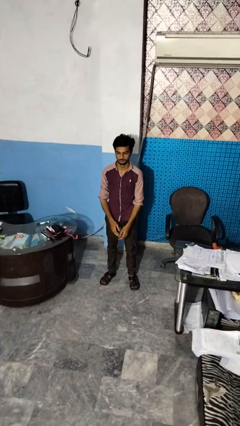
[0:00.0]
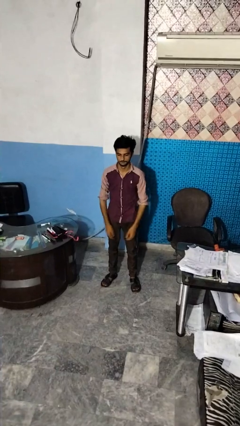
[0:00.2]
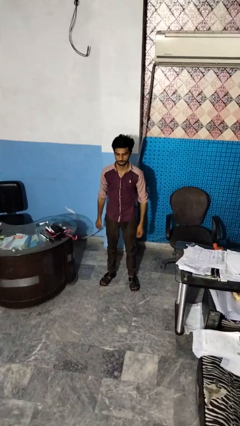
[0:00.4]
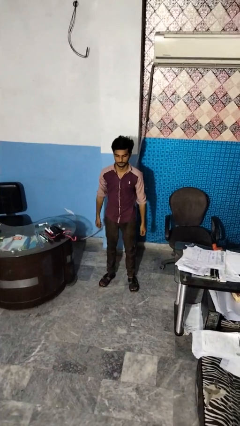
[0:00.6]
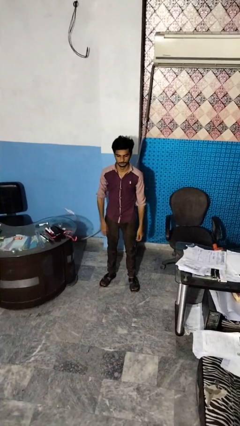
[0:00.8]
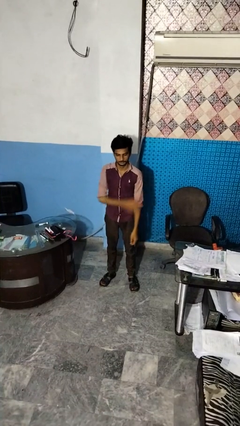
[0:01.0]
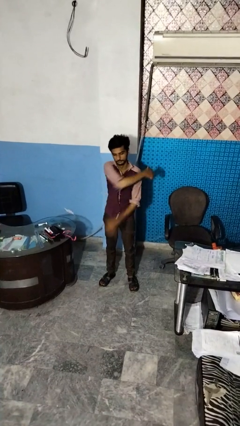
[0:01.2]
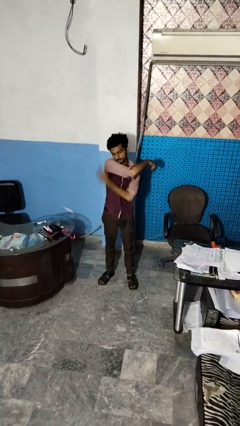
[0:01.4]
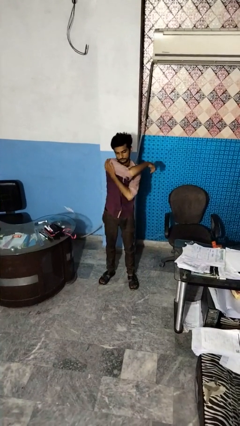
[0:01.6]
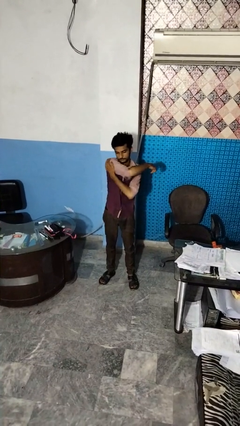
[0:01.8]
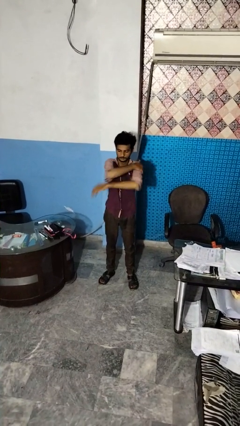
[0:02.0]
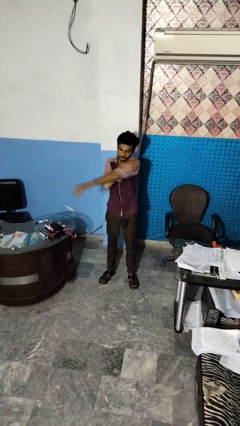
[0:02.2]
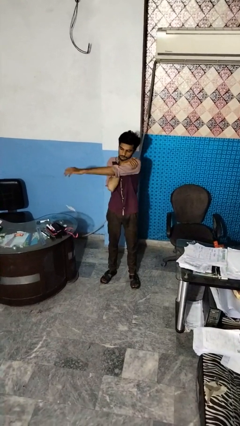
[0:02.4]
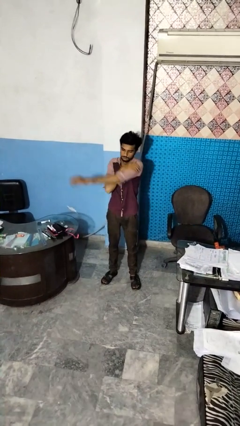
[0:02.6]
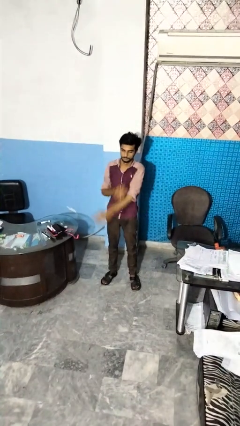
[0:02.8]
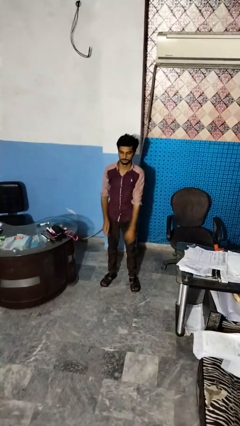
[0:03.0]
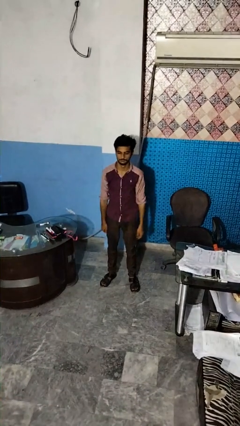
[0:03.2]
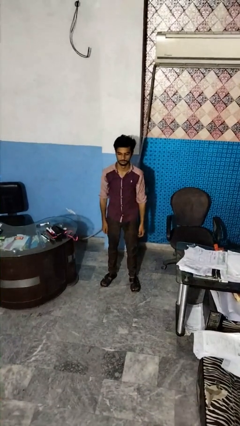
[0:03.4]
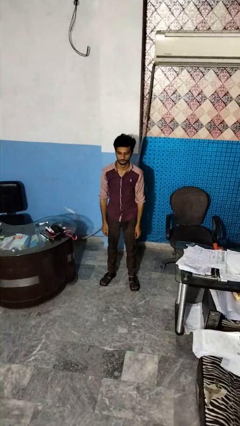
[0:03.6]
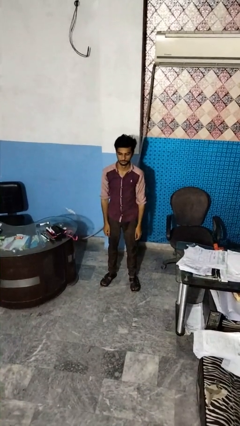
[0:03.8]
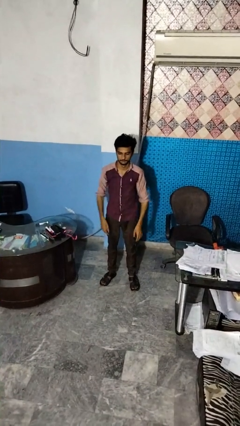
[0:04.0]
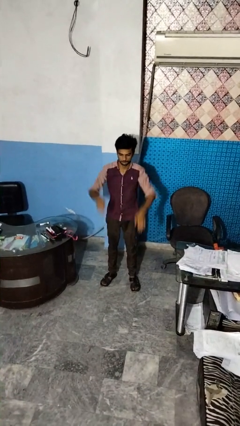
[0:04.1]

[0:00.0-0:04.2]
person stretches arms to side

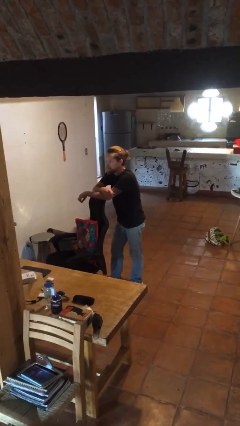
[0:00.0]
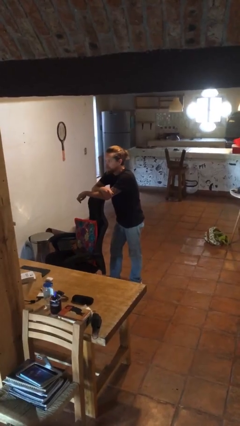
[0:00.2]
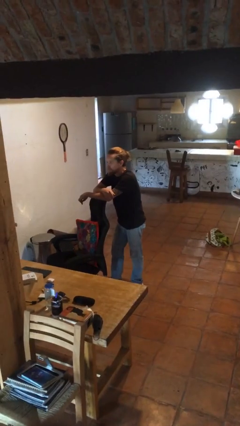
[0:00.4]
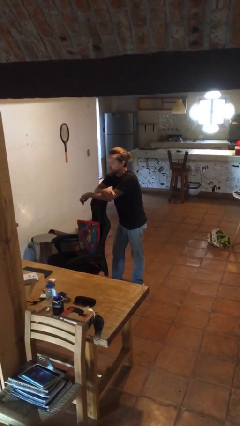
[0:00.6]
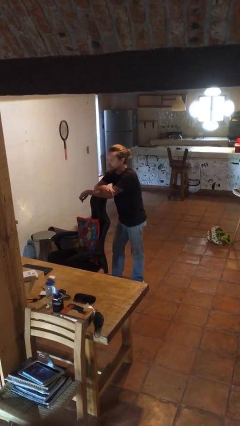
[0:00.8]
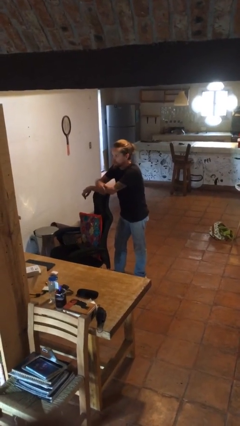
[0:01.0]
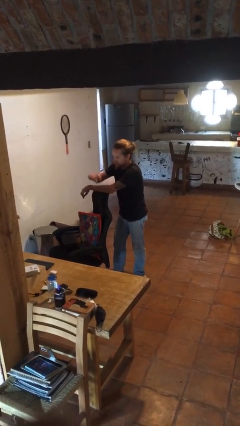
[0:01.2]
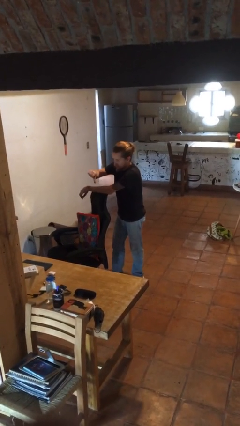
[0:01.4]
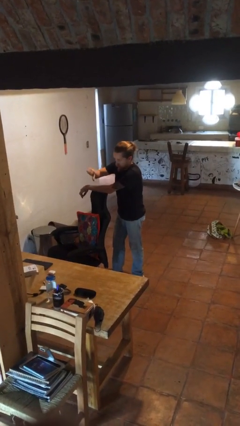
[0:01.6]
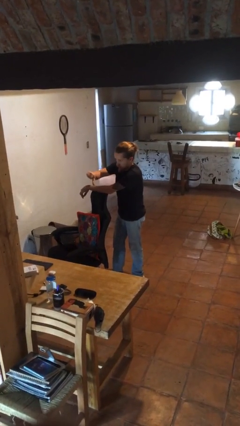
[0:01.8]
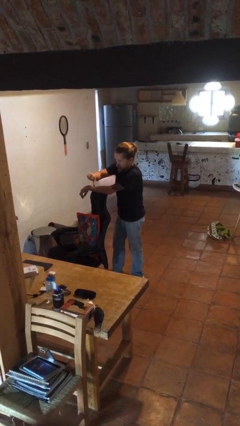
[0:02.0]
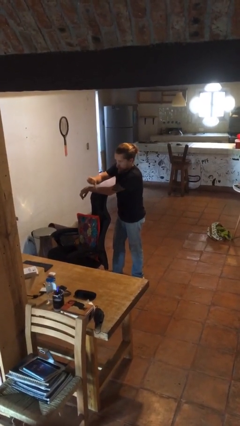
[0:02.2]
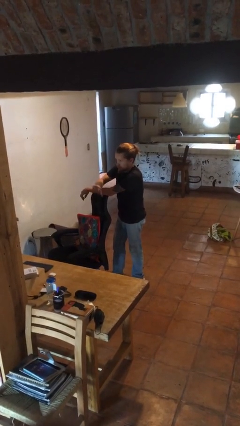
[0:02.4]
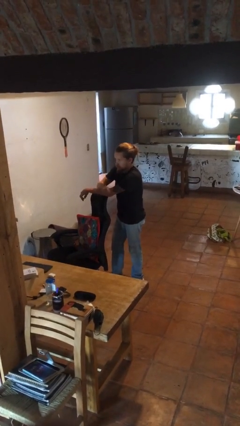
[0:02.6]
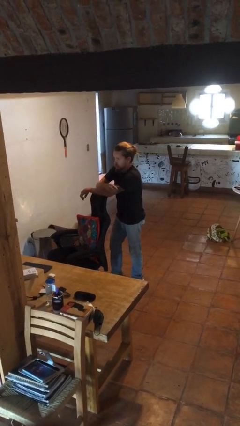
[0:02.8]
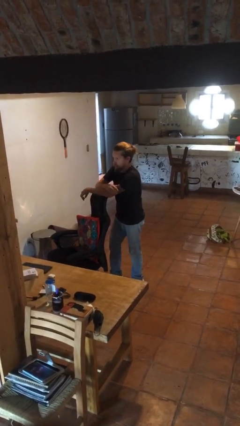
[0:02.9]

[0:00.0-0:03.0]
person gestures thumbs down

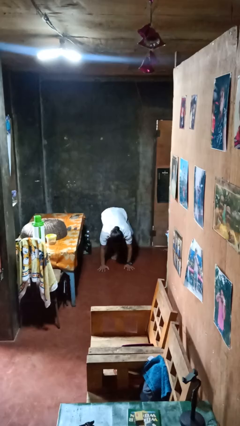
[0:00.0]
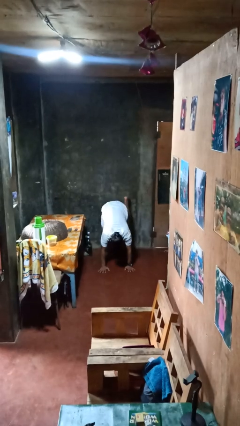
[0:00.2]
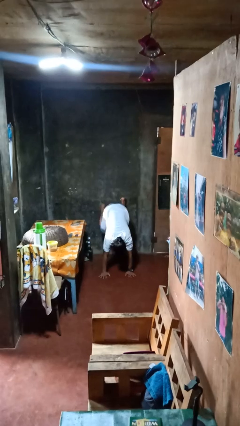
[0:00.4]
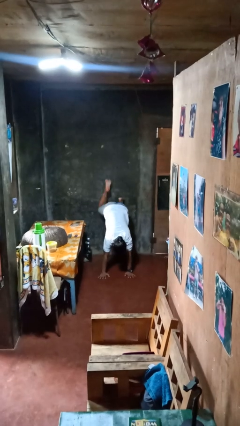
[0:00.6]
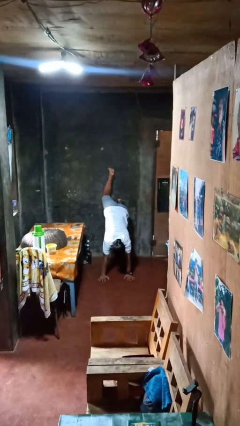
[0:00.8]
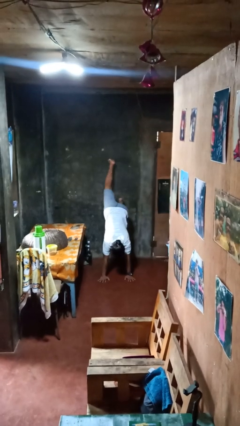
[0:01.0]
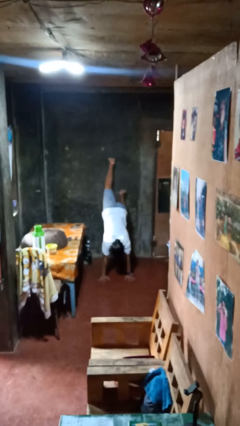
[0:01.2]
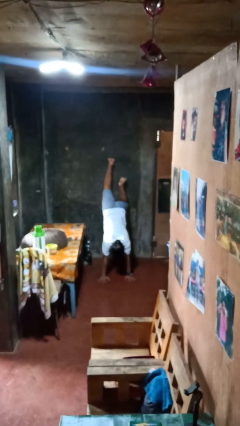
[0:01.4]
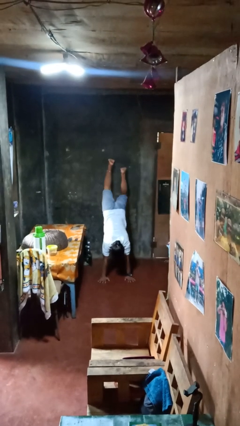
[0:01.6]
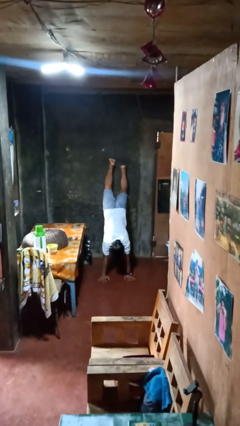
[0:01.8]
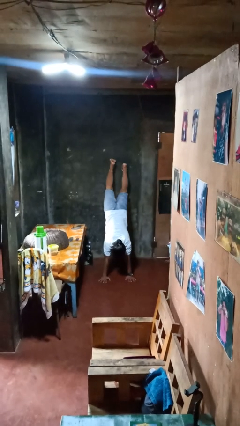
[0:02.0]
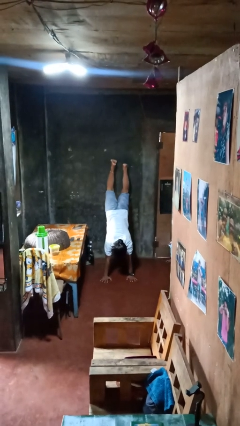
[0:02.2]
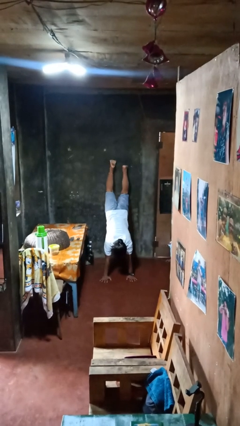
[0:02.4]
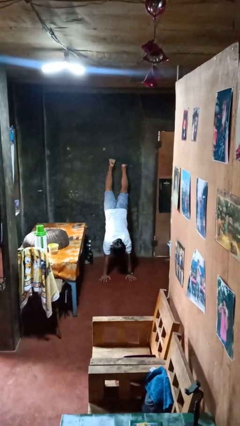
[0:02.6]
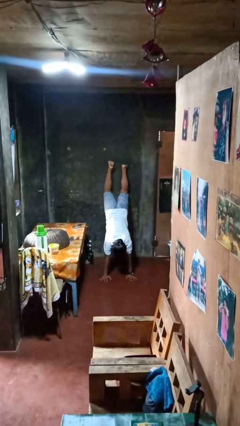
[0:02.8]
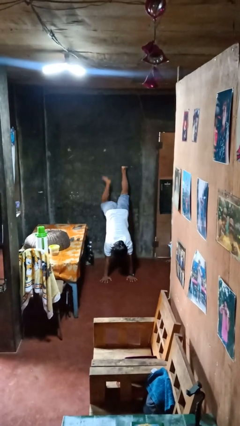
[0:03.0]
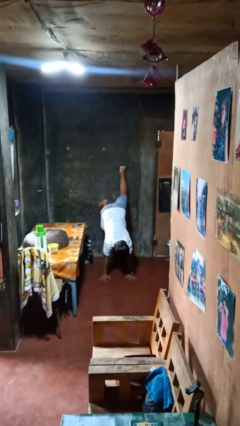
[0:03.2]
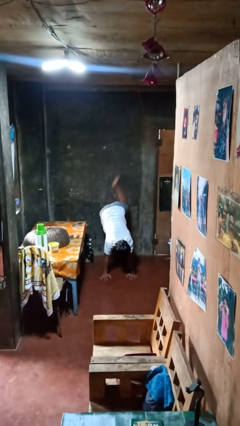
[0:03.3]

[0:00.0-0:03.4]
person handstand

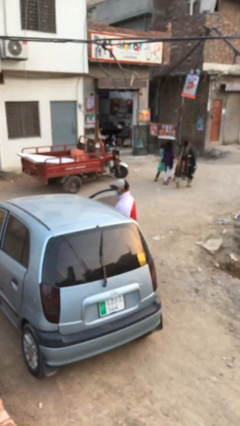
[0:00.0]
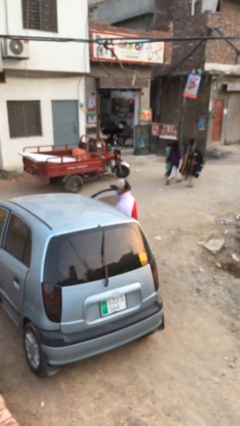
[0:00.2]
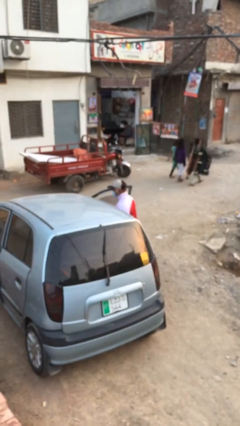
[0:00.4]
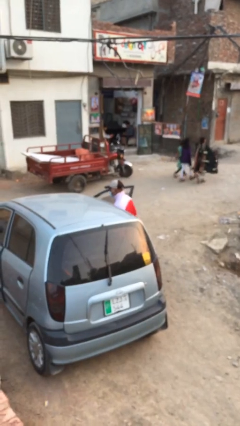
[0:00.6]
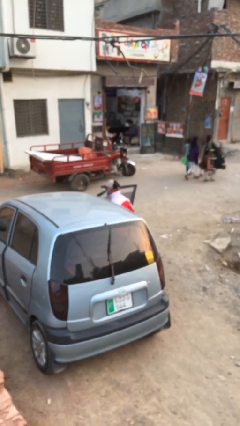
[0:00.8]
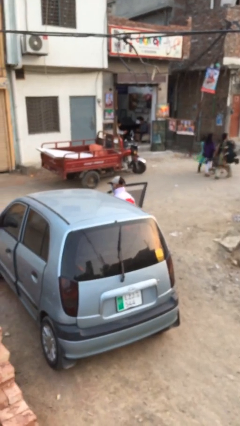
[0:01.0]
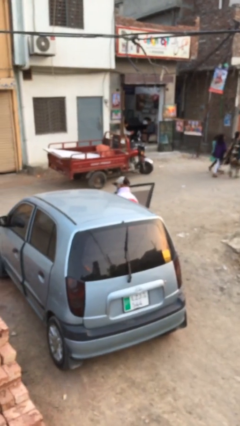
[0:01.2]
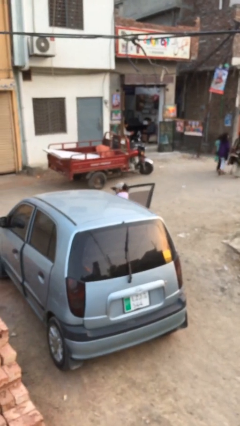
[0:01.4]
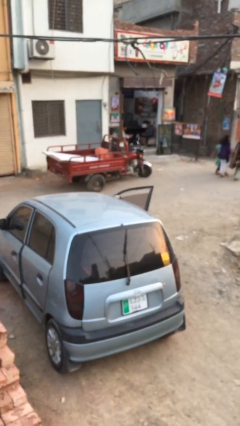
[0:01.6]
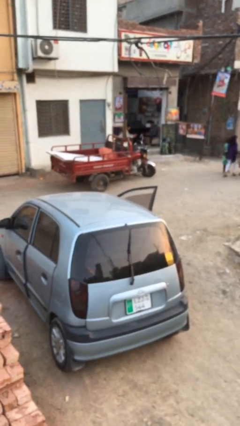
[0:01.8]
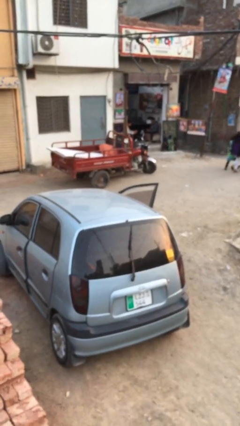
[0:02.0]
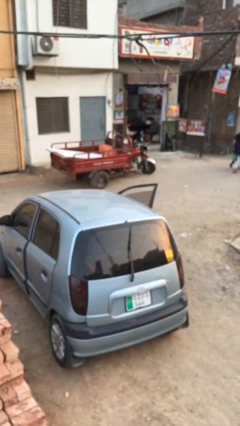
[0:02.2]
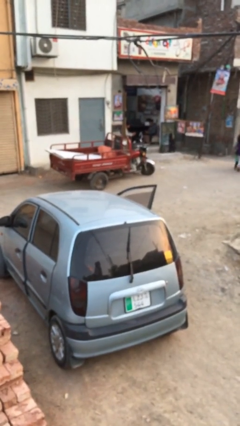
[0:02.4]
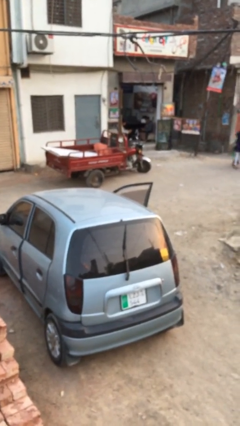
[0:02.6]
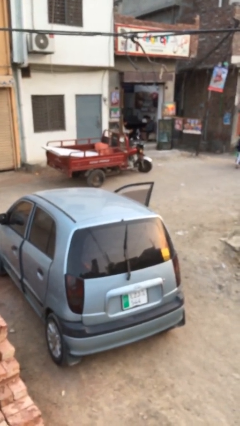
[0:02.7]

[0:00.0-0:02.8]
person enters car

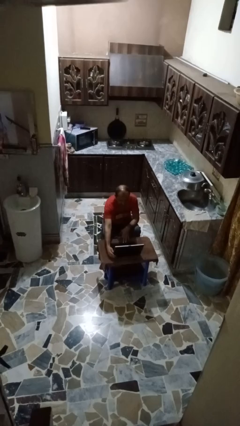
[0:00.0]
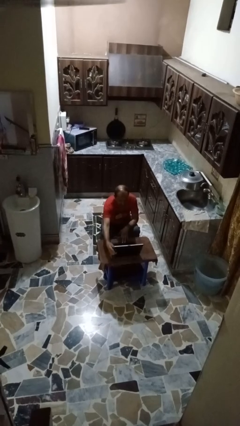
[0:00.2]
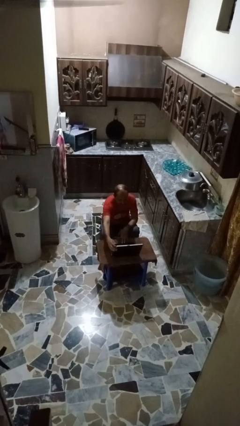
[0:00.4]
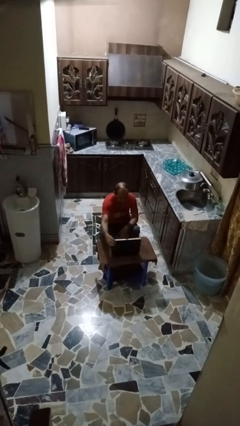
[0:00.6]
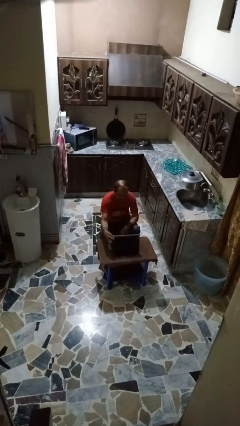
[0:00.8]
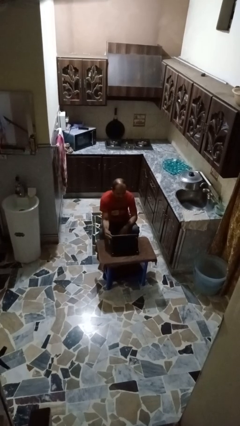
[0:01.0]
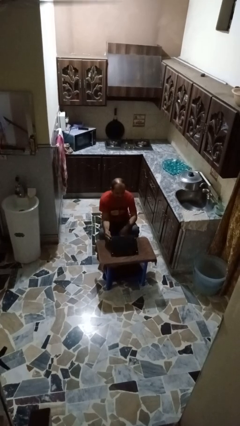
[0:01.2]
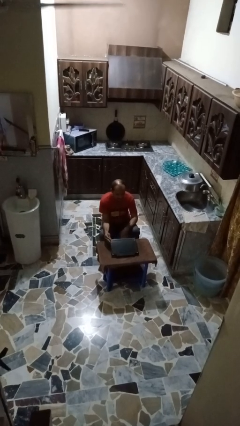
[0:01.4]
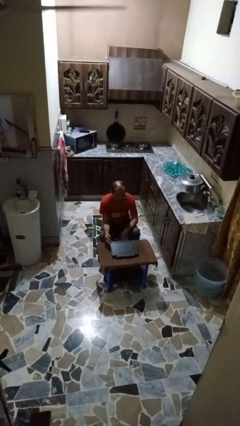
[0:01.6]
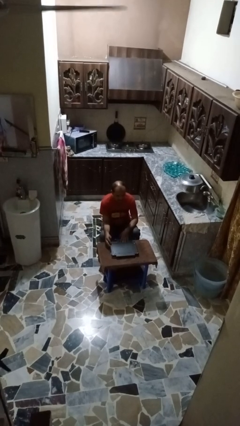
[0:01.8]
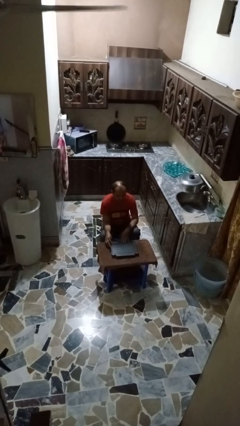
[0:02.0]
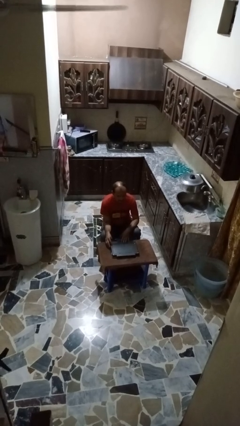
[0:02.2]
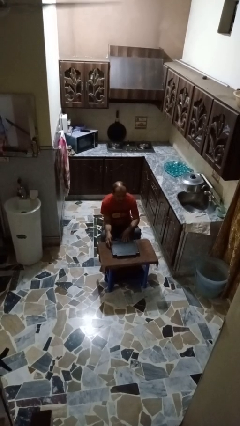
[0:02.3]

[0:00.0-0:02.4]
person closes laptop

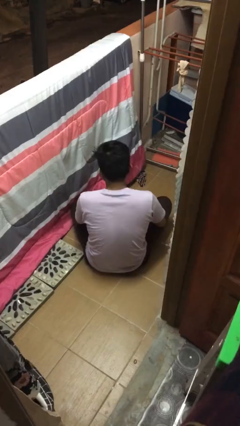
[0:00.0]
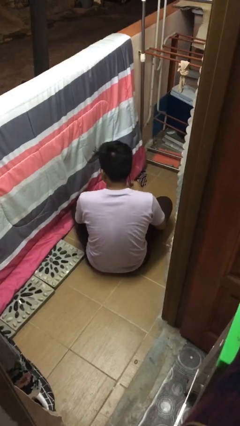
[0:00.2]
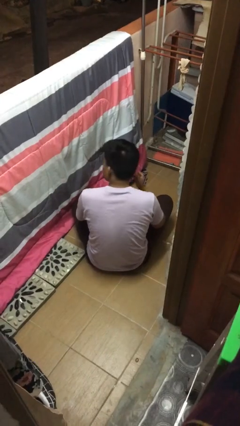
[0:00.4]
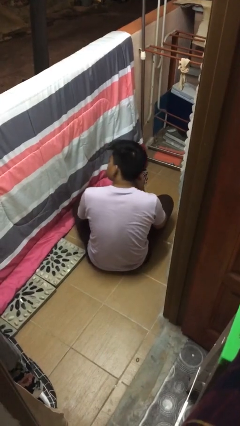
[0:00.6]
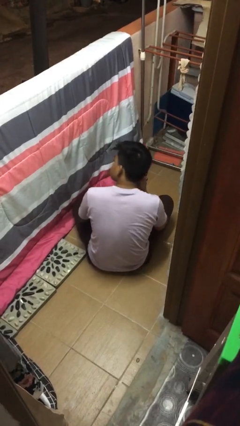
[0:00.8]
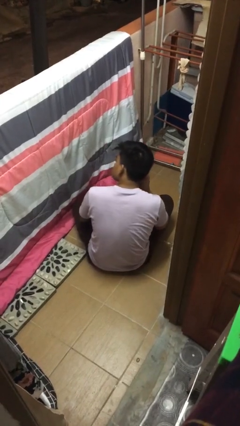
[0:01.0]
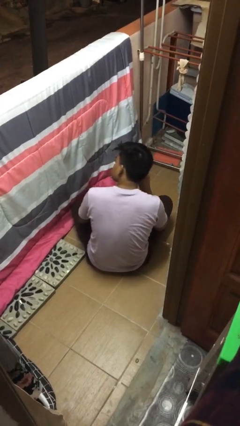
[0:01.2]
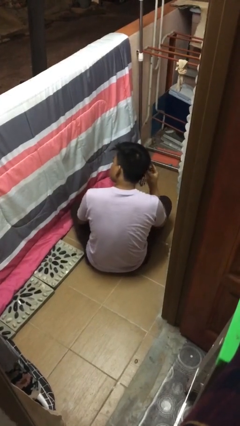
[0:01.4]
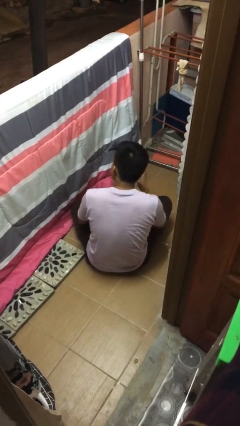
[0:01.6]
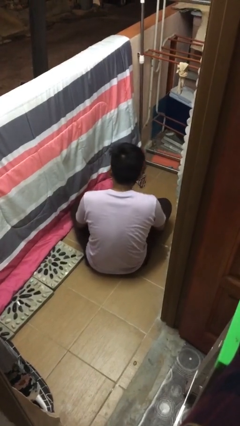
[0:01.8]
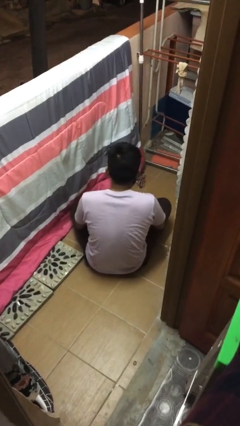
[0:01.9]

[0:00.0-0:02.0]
person takes off earrings
